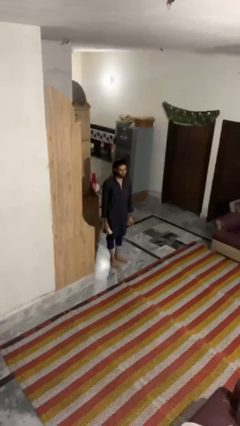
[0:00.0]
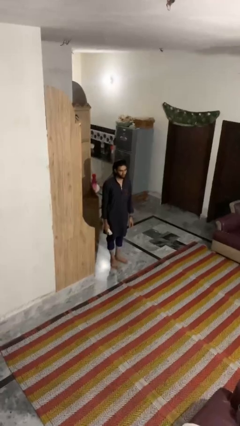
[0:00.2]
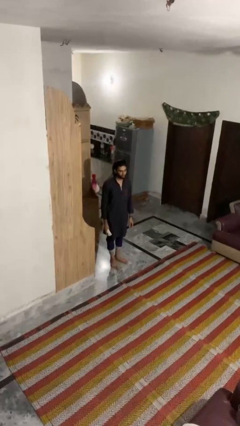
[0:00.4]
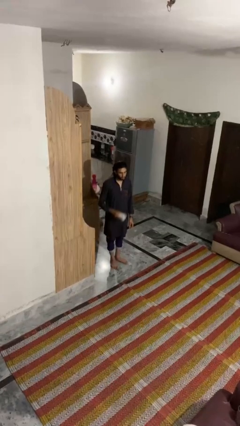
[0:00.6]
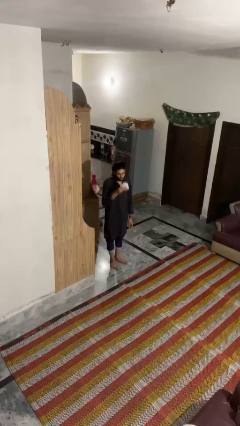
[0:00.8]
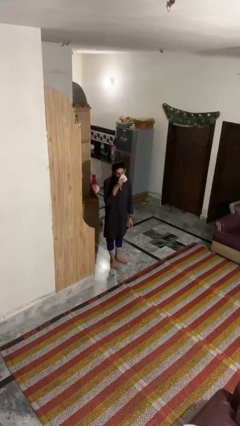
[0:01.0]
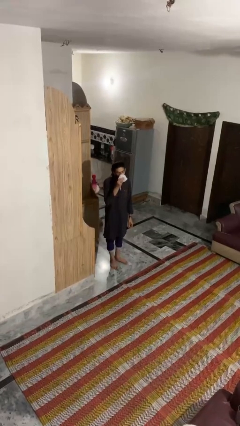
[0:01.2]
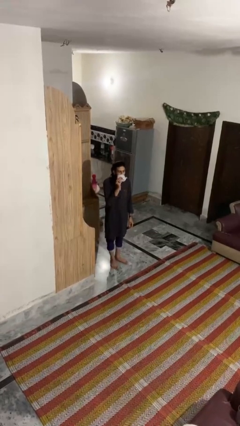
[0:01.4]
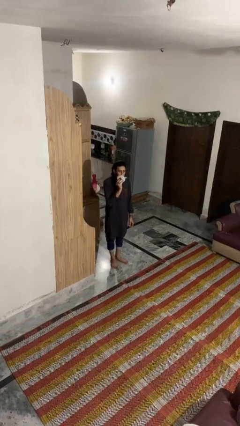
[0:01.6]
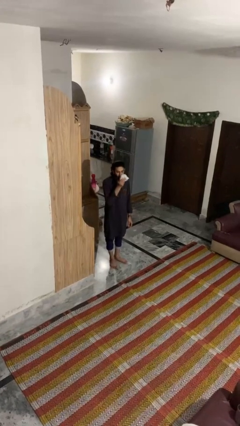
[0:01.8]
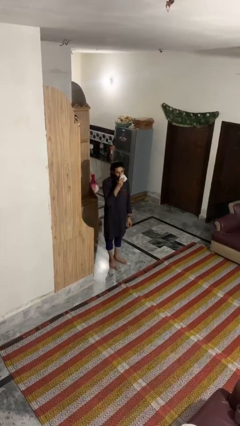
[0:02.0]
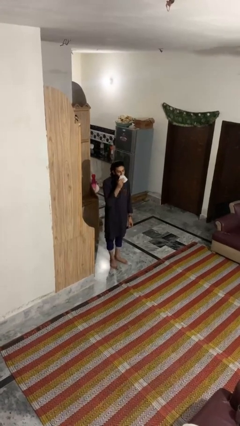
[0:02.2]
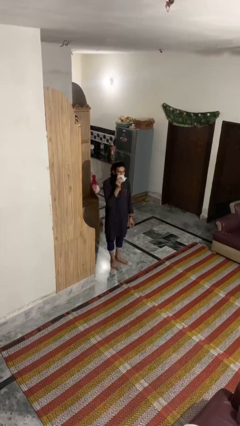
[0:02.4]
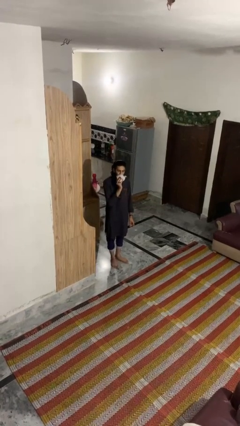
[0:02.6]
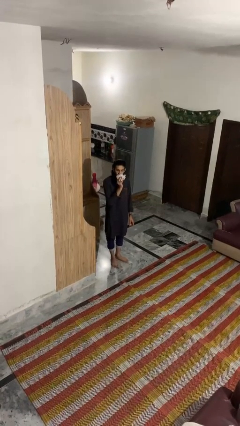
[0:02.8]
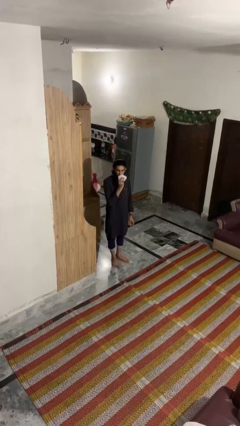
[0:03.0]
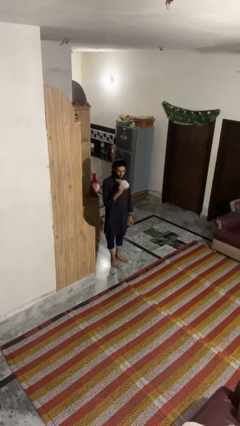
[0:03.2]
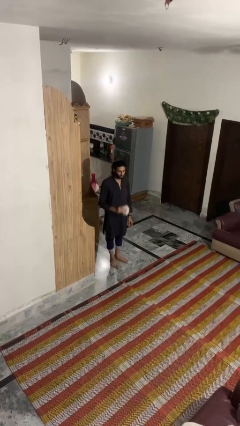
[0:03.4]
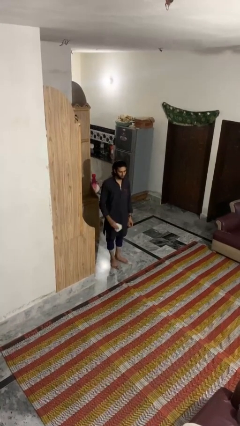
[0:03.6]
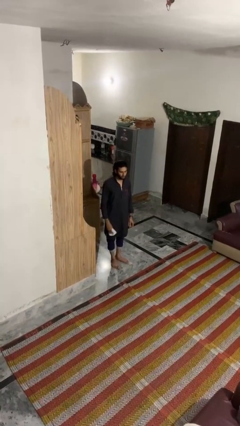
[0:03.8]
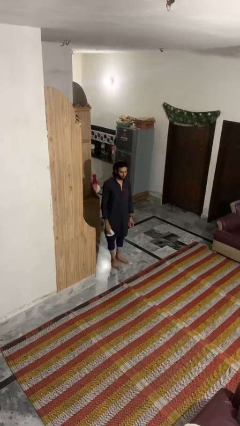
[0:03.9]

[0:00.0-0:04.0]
person wipes mouth with napkin

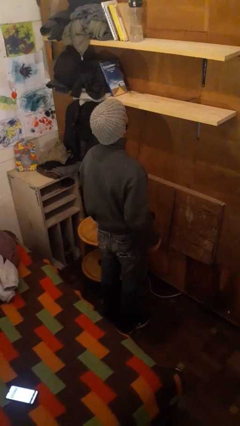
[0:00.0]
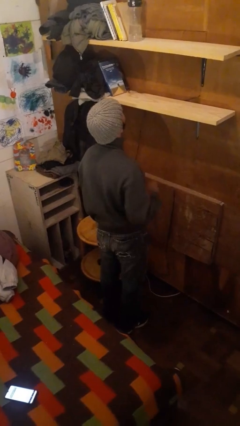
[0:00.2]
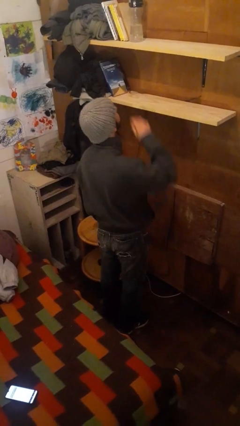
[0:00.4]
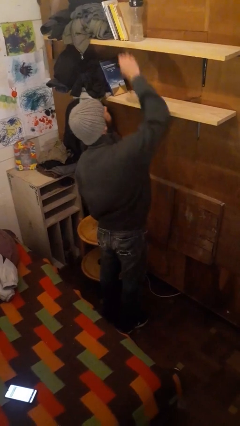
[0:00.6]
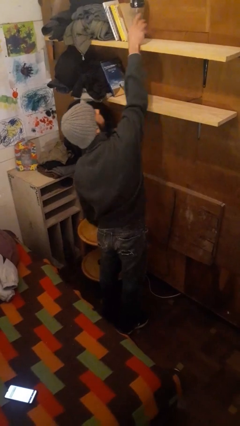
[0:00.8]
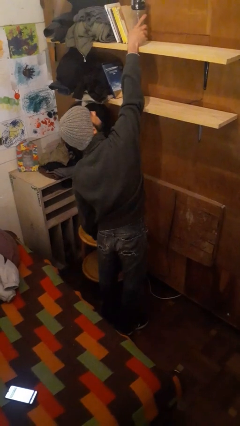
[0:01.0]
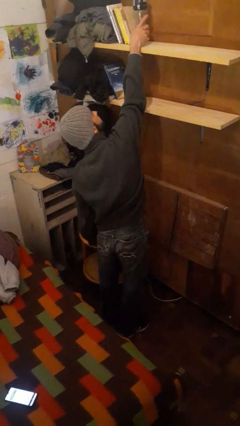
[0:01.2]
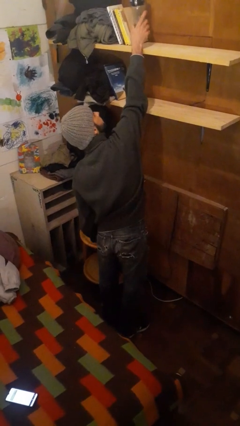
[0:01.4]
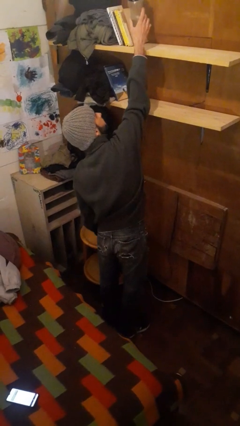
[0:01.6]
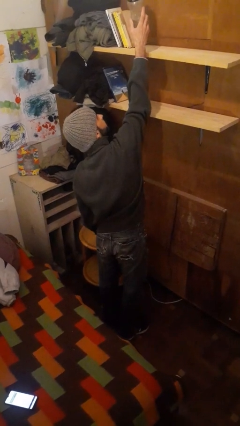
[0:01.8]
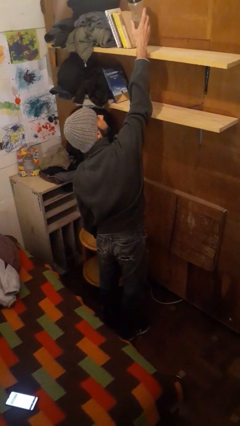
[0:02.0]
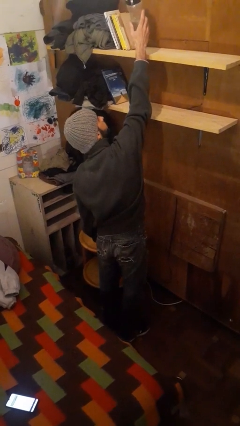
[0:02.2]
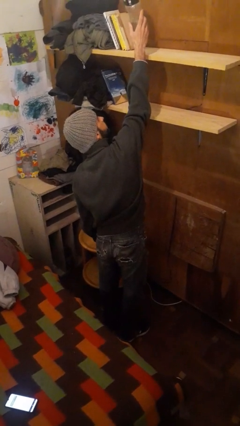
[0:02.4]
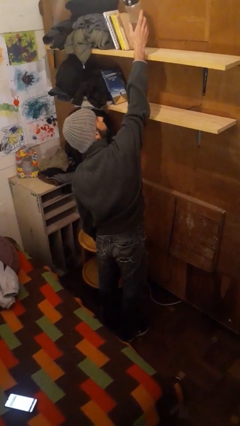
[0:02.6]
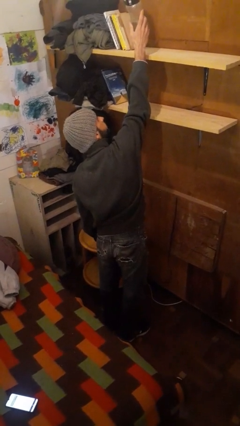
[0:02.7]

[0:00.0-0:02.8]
person picks up object from shelf

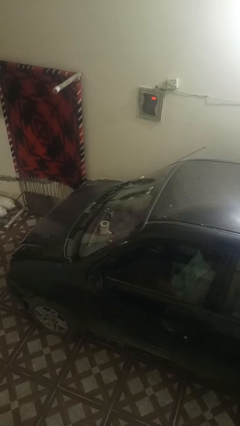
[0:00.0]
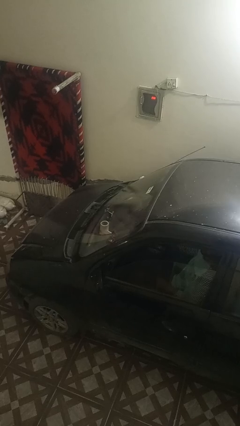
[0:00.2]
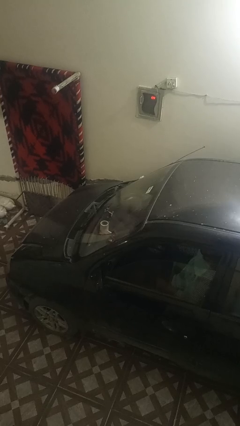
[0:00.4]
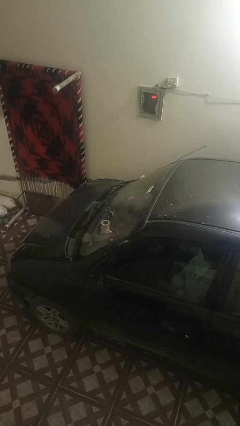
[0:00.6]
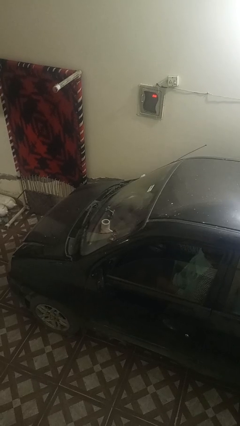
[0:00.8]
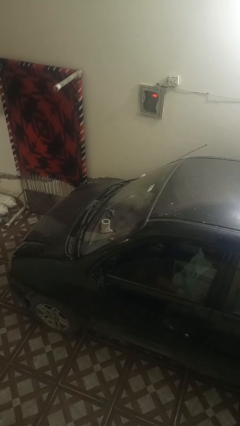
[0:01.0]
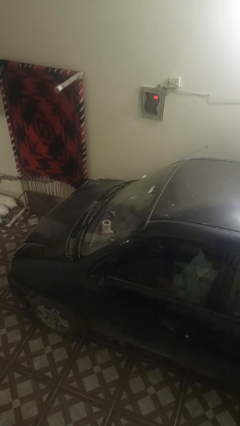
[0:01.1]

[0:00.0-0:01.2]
person flips down car wipers

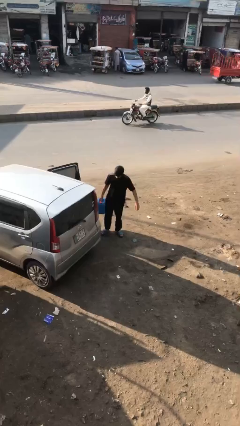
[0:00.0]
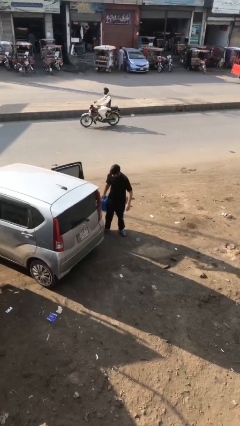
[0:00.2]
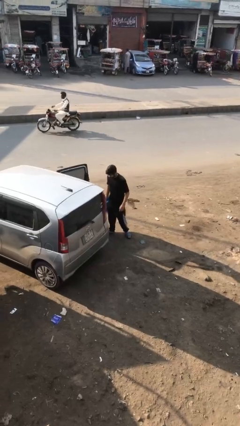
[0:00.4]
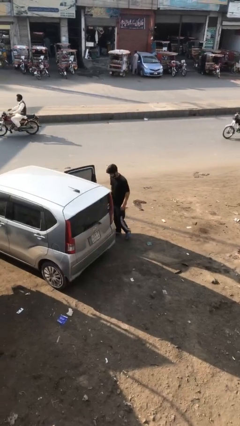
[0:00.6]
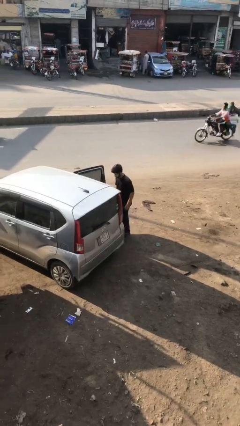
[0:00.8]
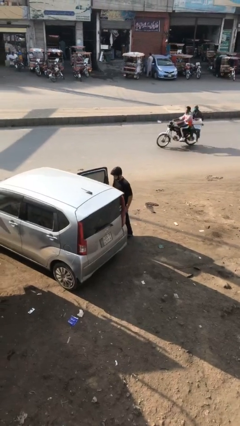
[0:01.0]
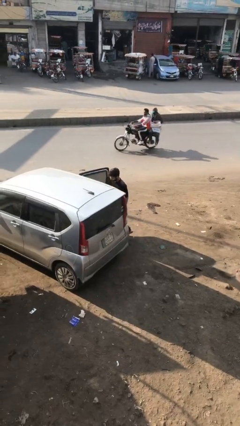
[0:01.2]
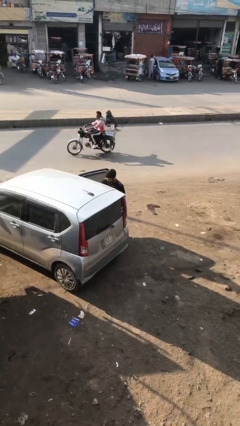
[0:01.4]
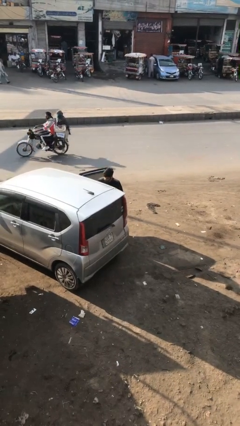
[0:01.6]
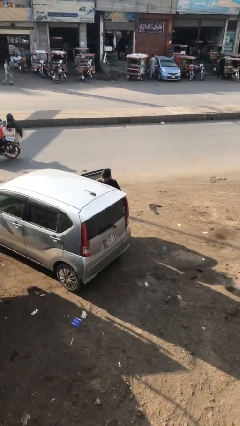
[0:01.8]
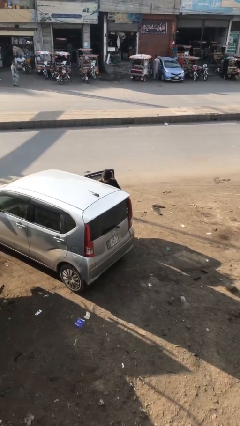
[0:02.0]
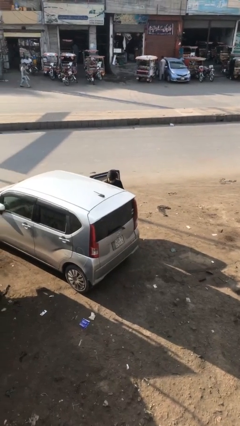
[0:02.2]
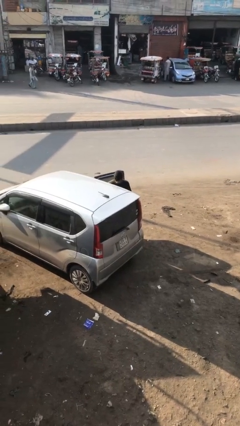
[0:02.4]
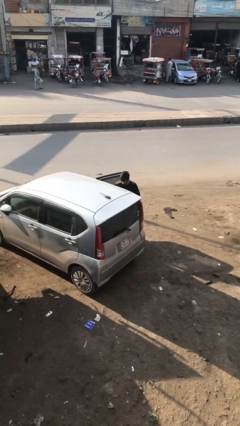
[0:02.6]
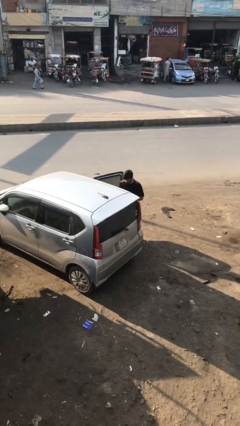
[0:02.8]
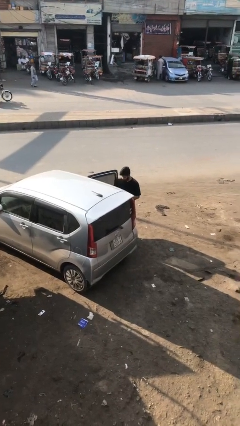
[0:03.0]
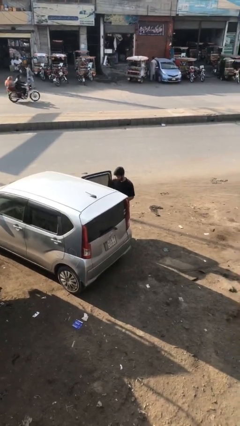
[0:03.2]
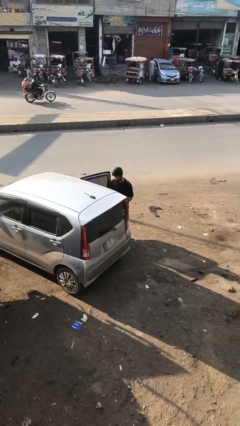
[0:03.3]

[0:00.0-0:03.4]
person loads car

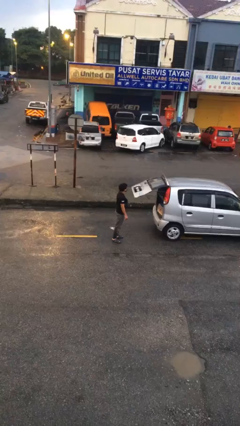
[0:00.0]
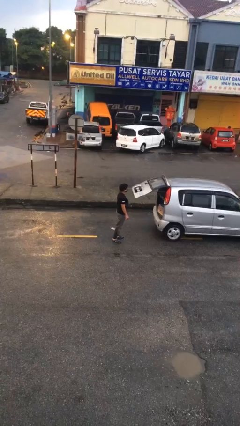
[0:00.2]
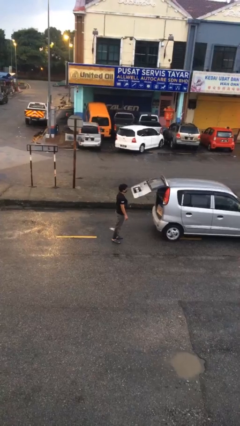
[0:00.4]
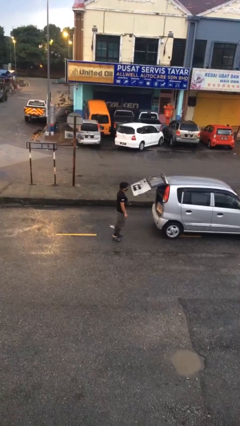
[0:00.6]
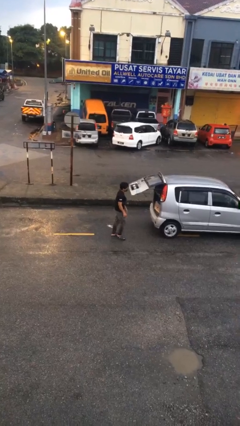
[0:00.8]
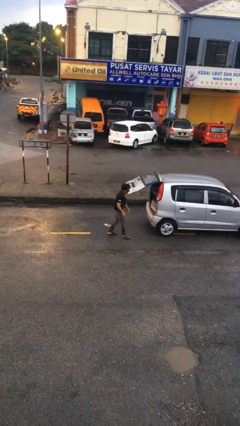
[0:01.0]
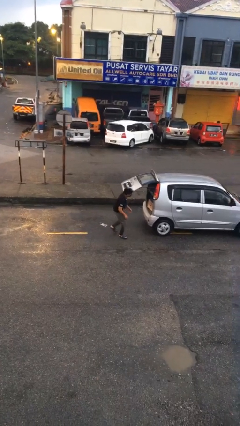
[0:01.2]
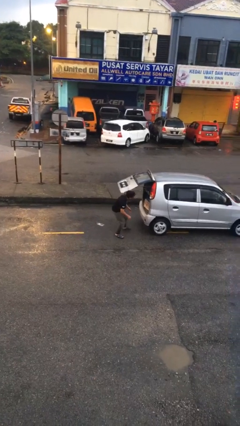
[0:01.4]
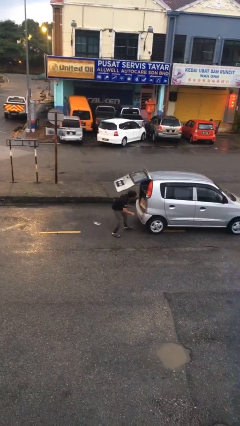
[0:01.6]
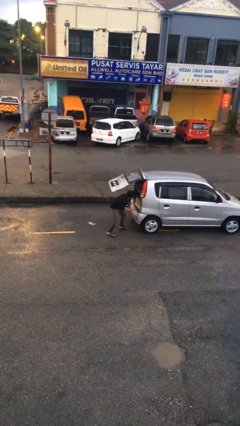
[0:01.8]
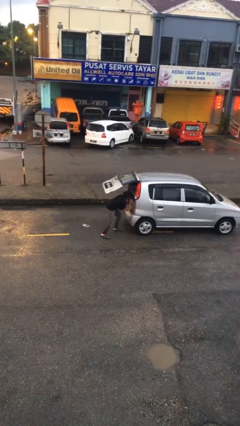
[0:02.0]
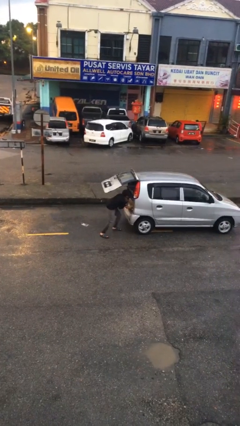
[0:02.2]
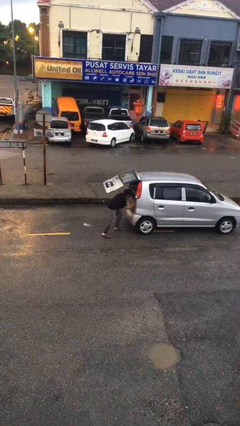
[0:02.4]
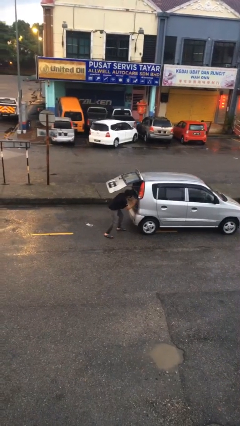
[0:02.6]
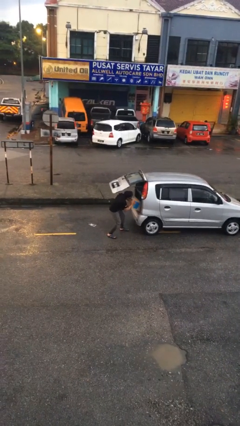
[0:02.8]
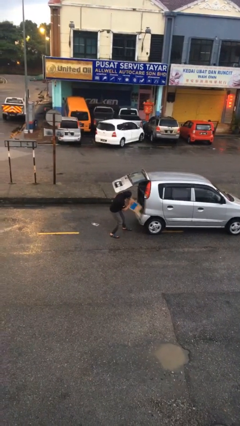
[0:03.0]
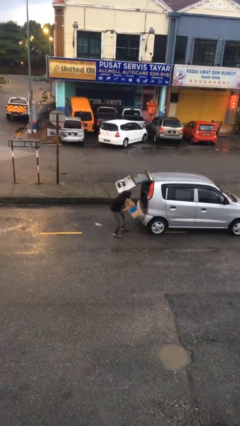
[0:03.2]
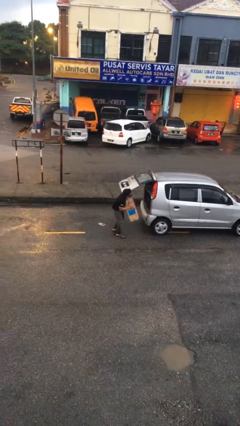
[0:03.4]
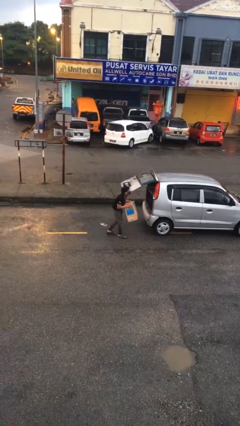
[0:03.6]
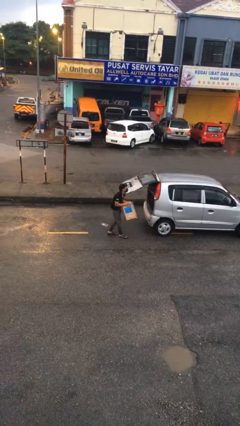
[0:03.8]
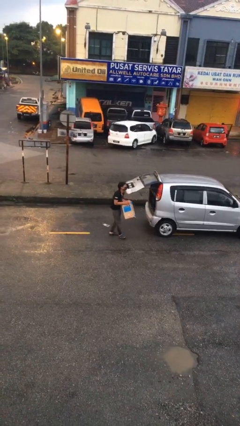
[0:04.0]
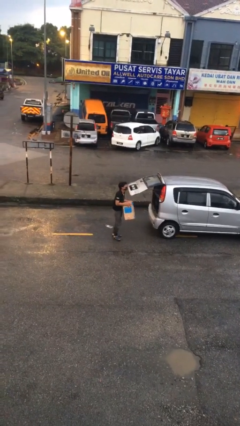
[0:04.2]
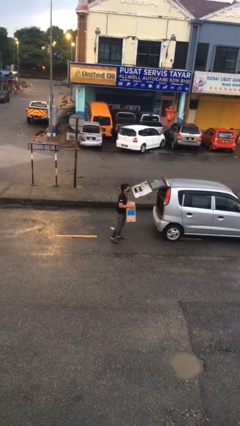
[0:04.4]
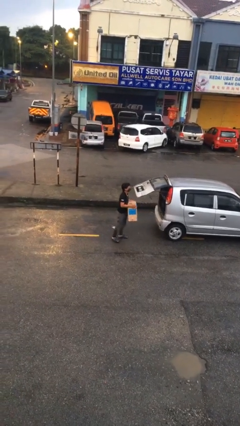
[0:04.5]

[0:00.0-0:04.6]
person unloads car

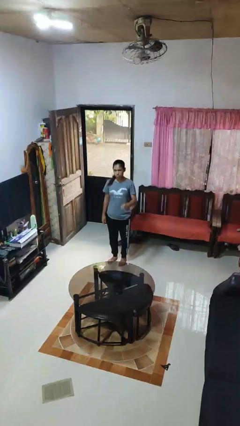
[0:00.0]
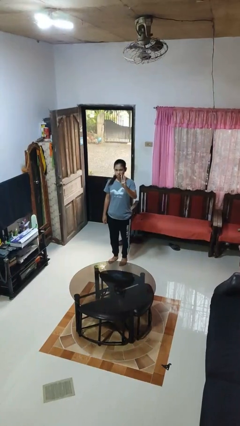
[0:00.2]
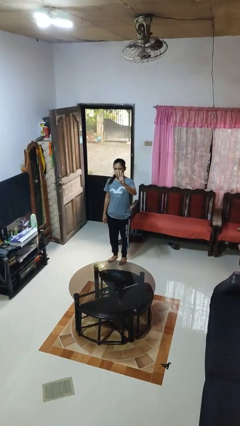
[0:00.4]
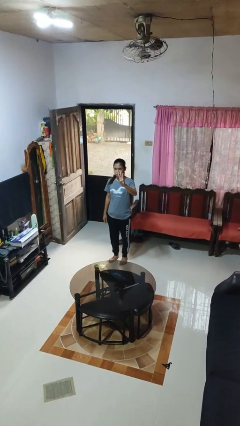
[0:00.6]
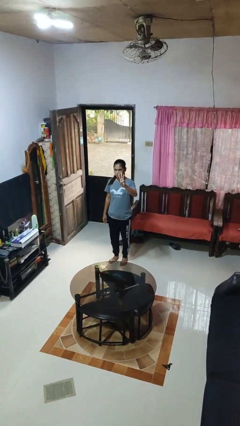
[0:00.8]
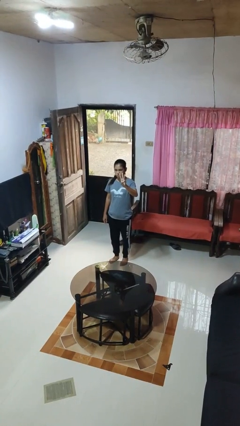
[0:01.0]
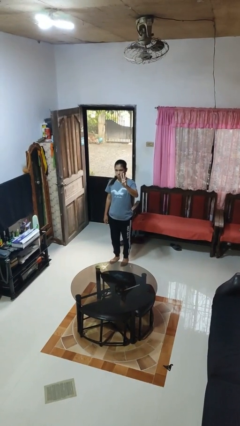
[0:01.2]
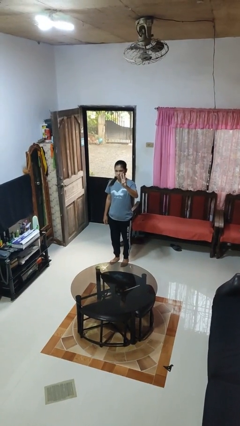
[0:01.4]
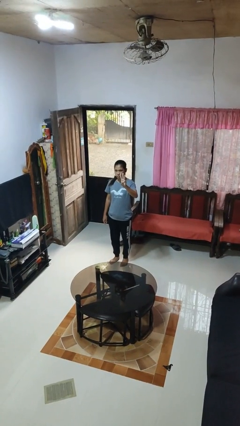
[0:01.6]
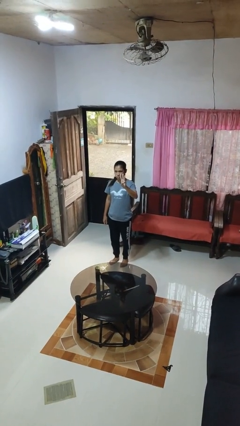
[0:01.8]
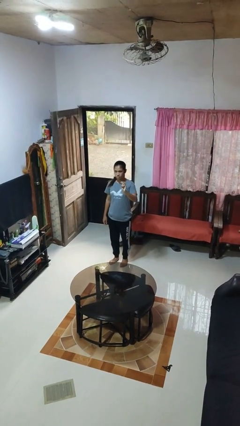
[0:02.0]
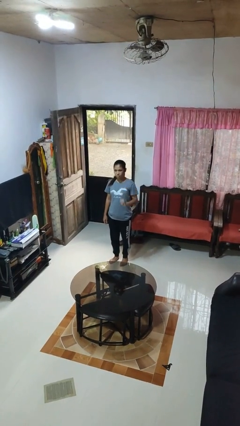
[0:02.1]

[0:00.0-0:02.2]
person gestures number three
